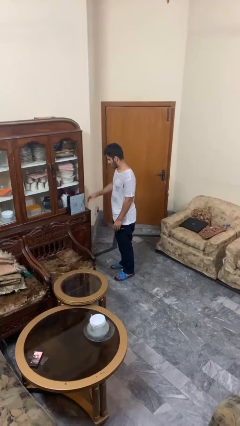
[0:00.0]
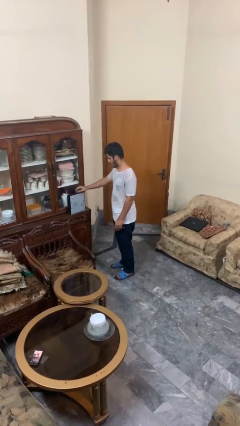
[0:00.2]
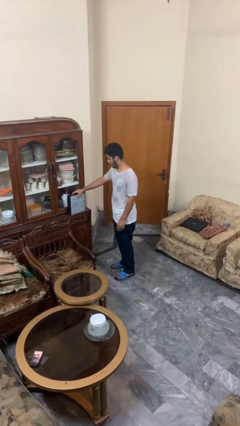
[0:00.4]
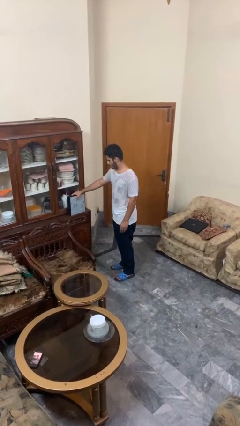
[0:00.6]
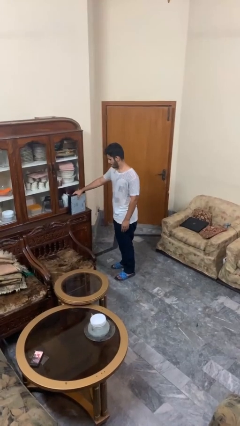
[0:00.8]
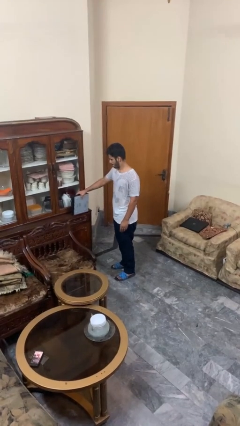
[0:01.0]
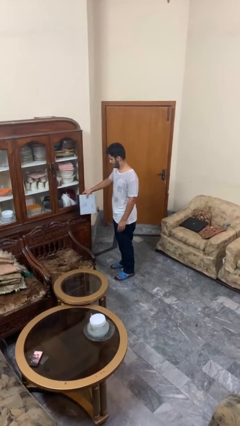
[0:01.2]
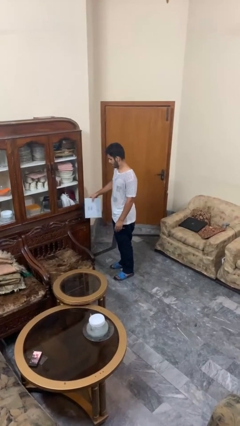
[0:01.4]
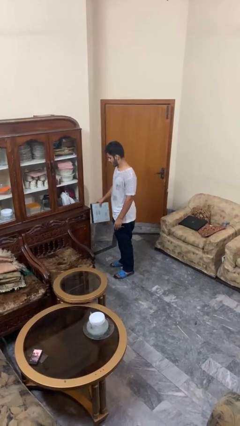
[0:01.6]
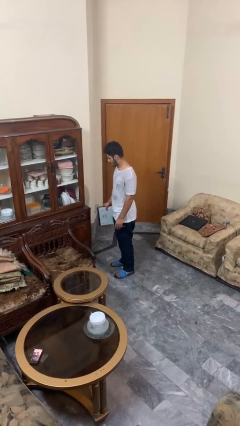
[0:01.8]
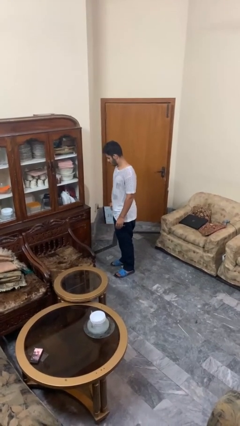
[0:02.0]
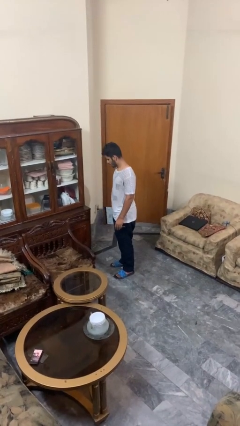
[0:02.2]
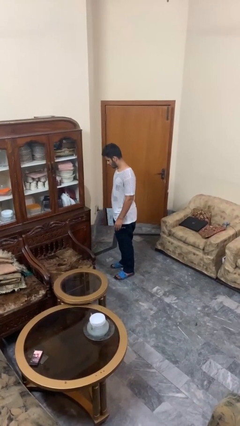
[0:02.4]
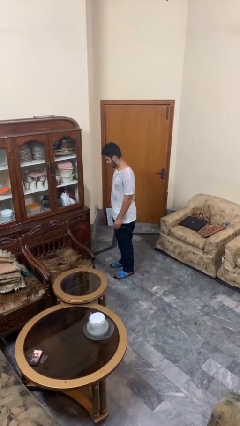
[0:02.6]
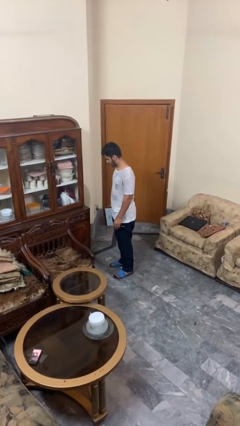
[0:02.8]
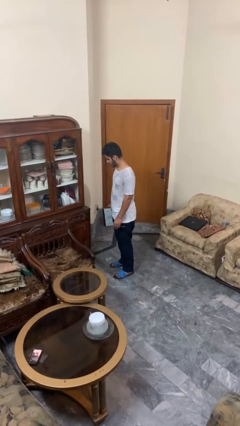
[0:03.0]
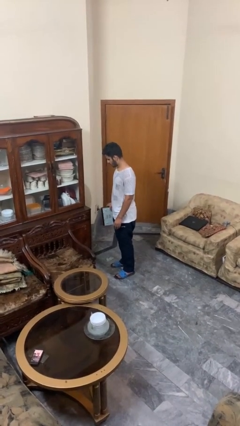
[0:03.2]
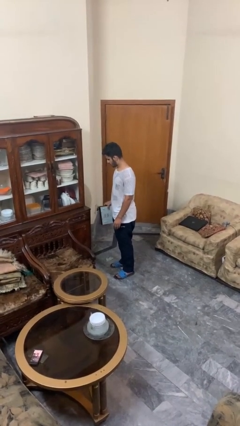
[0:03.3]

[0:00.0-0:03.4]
person picks up object from countertop

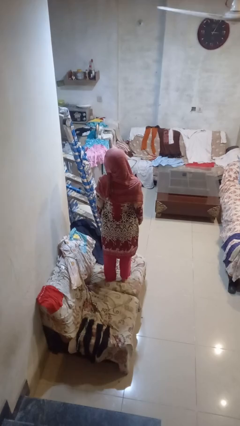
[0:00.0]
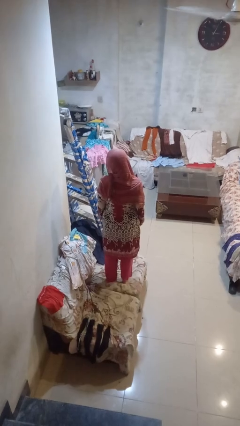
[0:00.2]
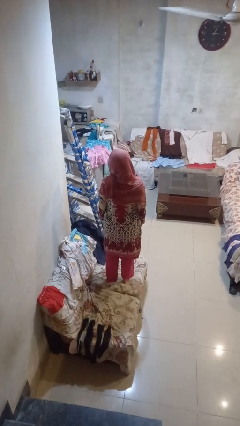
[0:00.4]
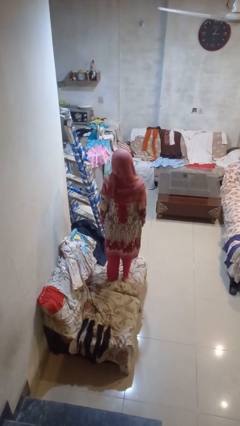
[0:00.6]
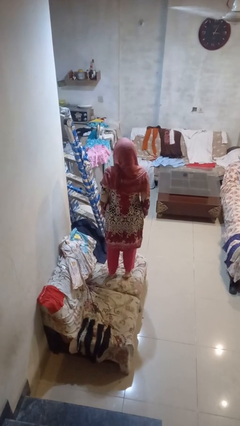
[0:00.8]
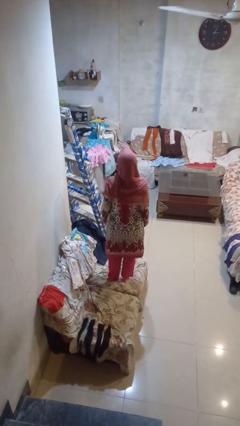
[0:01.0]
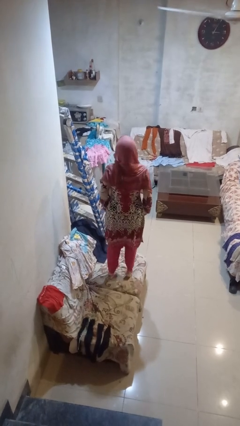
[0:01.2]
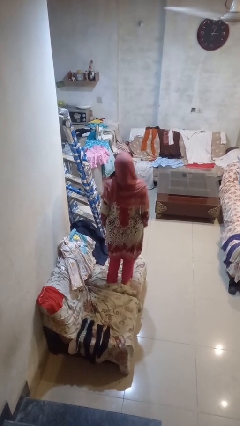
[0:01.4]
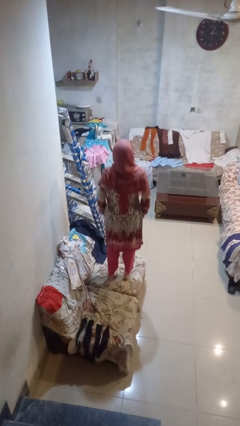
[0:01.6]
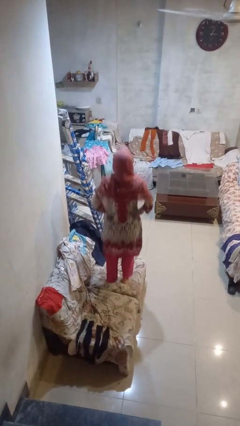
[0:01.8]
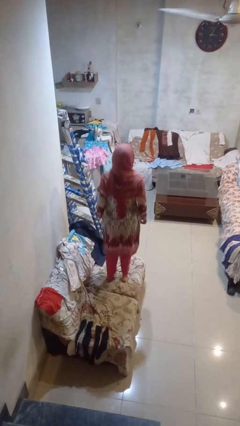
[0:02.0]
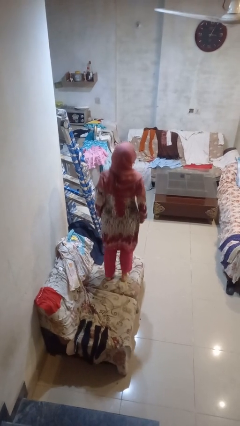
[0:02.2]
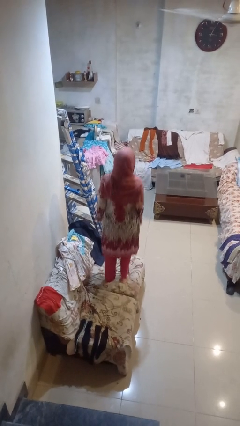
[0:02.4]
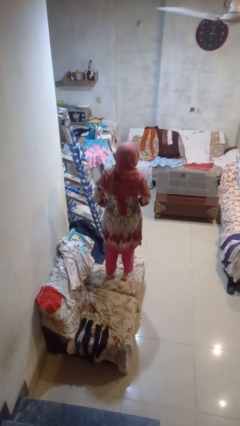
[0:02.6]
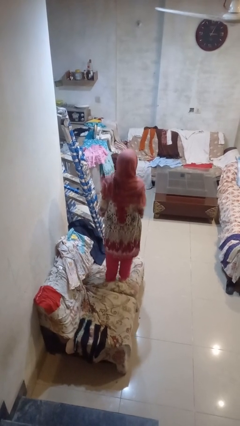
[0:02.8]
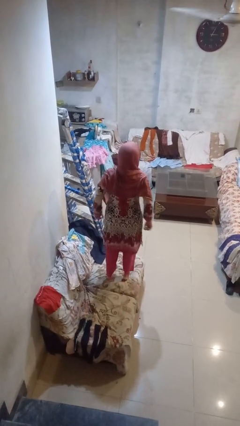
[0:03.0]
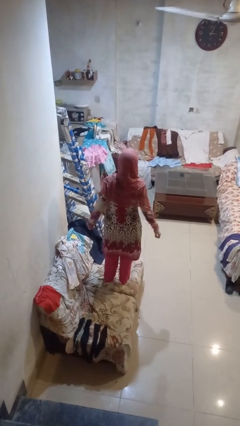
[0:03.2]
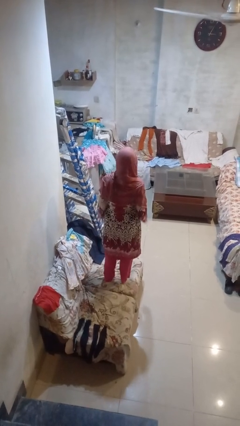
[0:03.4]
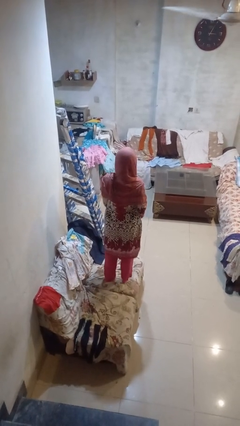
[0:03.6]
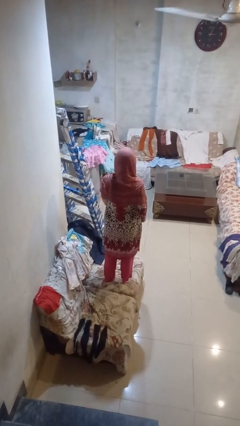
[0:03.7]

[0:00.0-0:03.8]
person jumps on couch

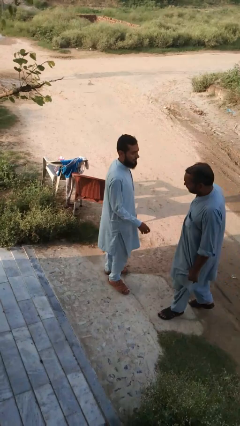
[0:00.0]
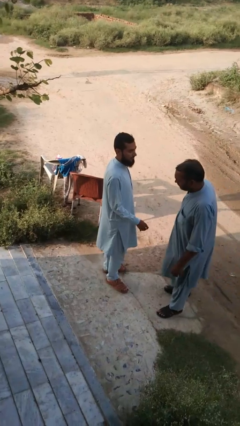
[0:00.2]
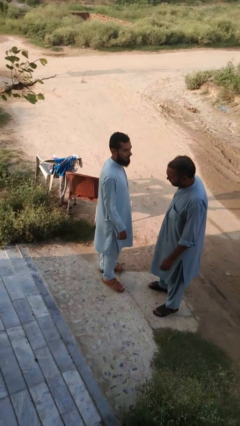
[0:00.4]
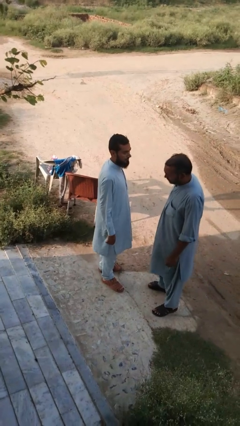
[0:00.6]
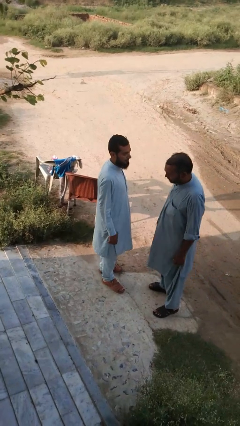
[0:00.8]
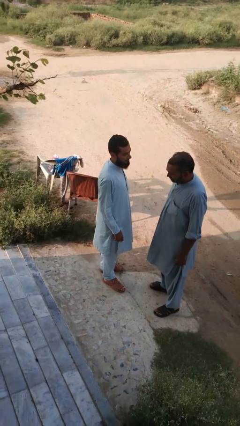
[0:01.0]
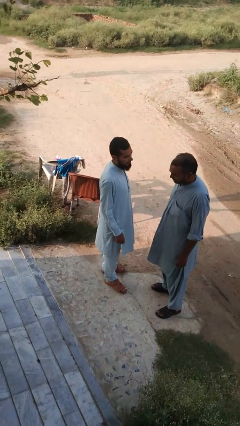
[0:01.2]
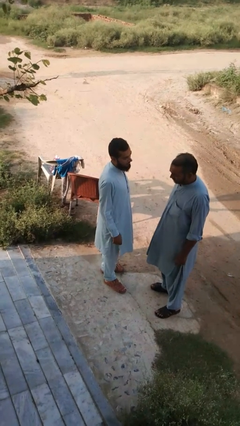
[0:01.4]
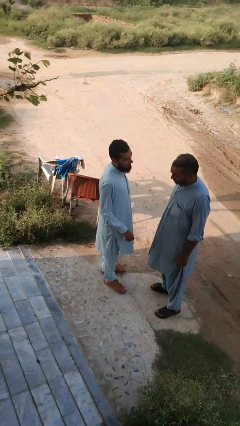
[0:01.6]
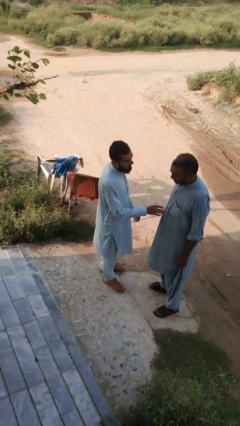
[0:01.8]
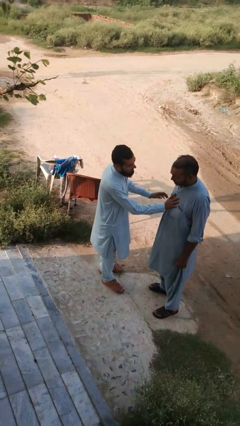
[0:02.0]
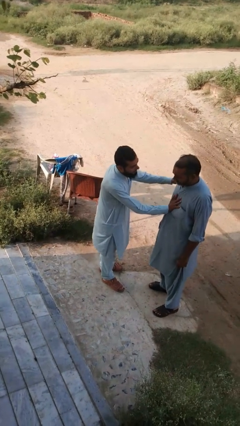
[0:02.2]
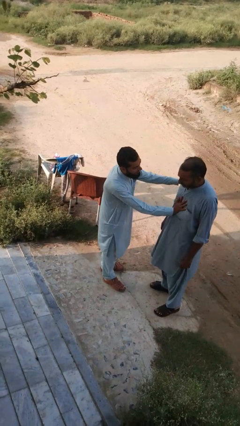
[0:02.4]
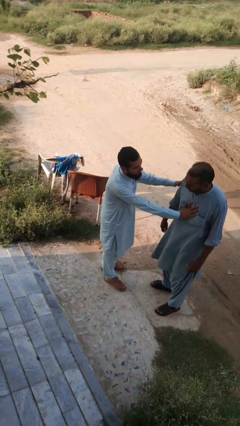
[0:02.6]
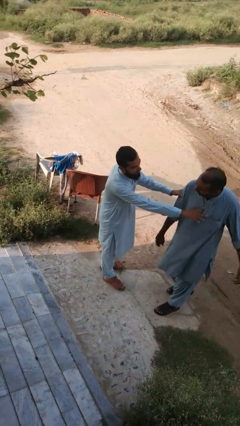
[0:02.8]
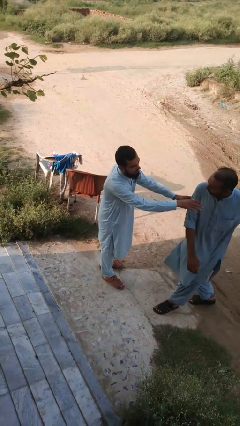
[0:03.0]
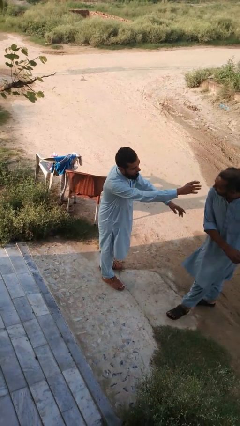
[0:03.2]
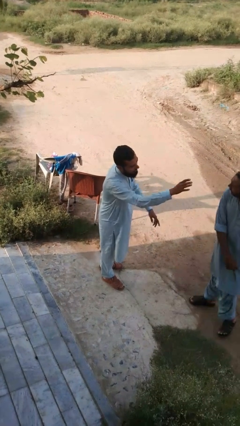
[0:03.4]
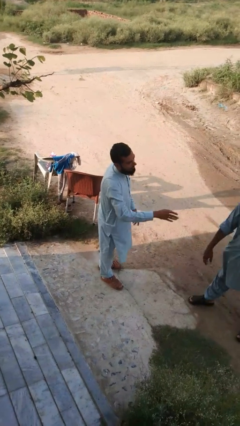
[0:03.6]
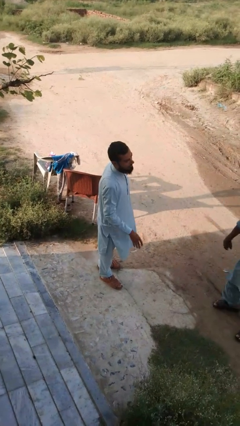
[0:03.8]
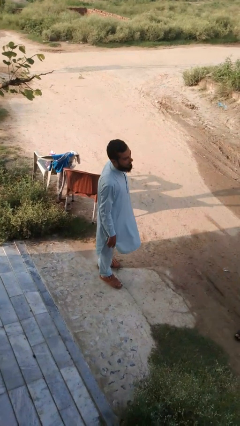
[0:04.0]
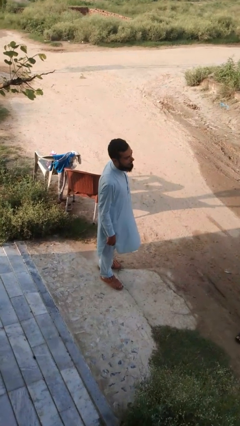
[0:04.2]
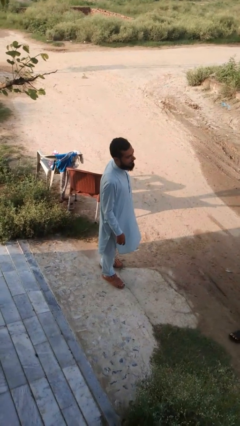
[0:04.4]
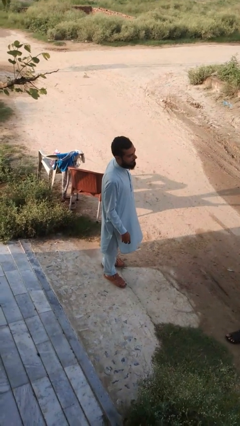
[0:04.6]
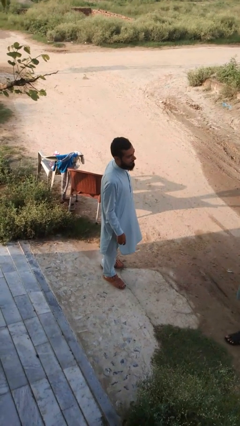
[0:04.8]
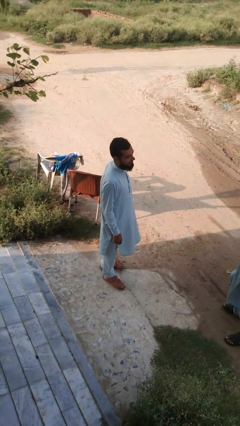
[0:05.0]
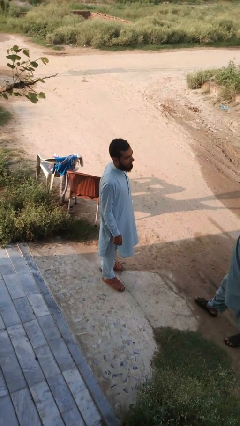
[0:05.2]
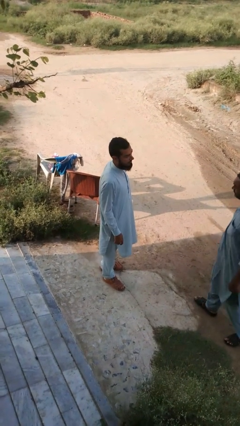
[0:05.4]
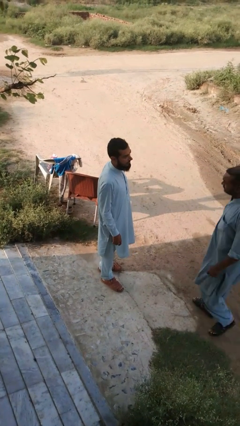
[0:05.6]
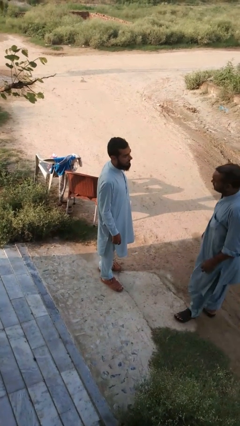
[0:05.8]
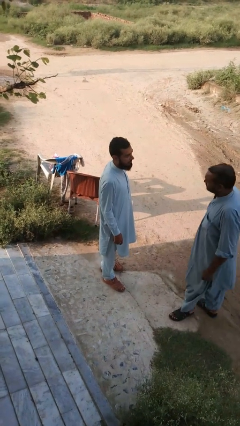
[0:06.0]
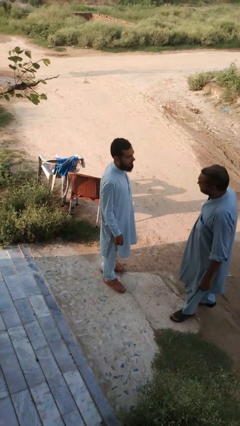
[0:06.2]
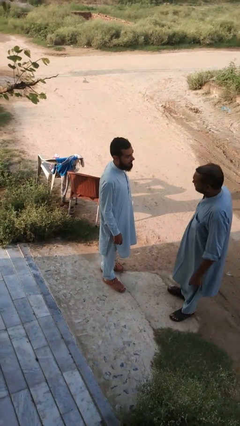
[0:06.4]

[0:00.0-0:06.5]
person shoves person

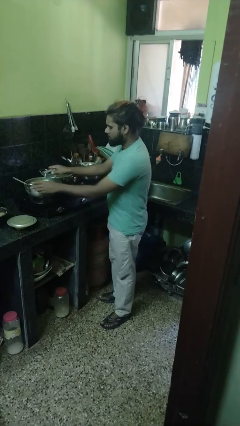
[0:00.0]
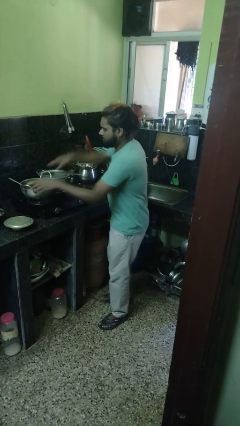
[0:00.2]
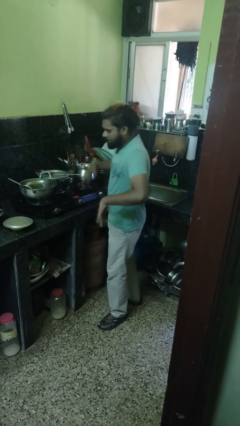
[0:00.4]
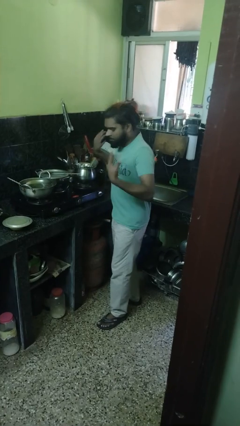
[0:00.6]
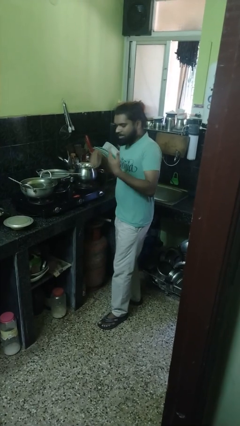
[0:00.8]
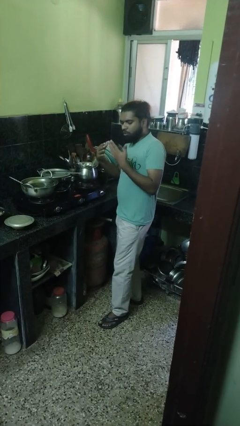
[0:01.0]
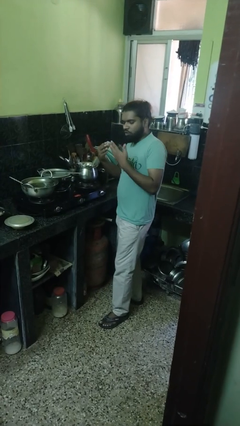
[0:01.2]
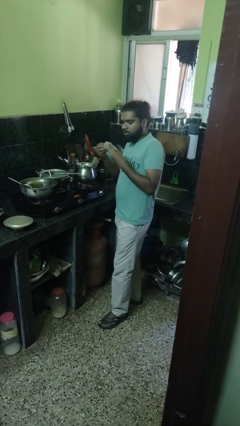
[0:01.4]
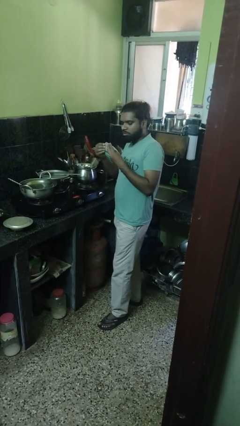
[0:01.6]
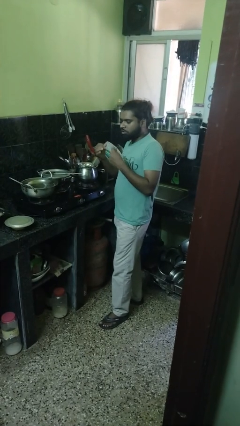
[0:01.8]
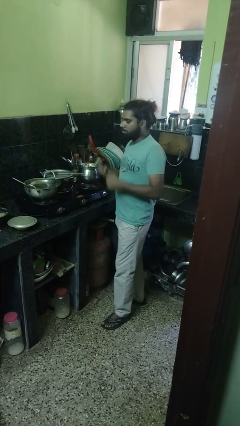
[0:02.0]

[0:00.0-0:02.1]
person burns hand

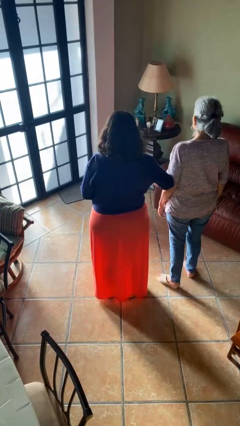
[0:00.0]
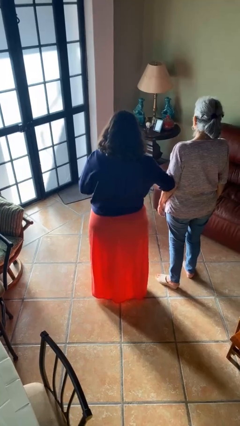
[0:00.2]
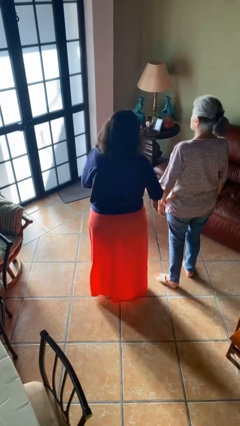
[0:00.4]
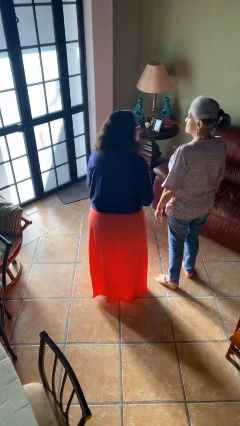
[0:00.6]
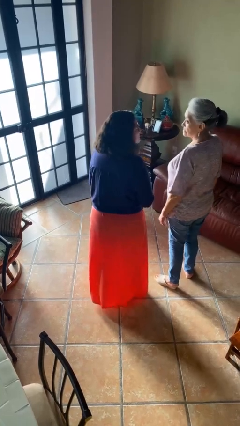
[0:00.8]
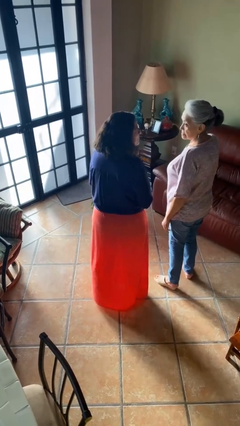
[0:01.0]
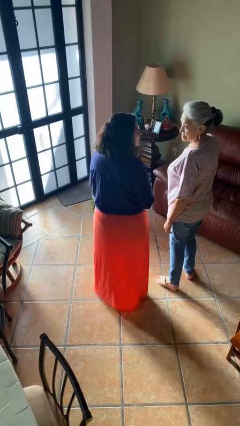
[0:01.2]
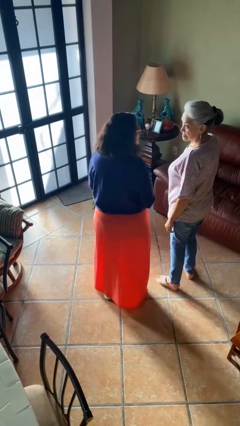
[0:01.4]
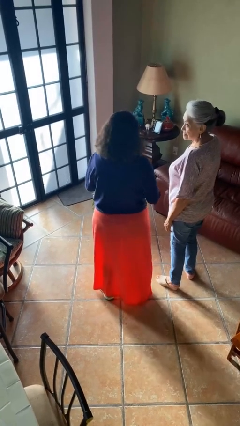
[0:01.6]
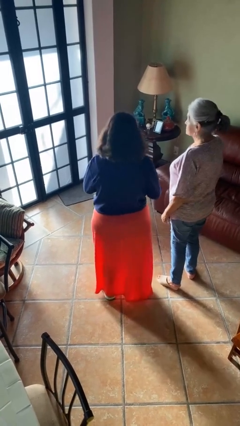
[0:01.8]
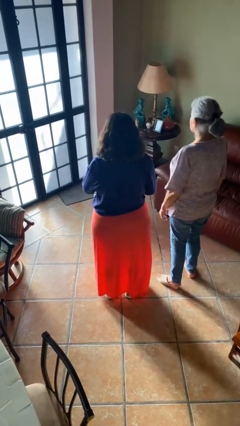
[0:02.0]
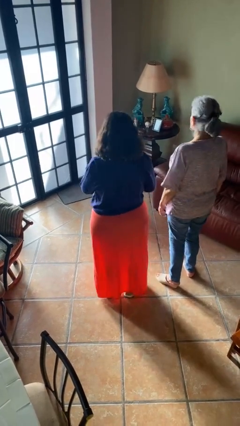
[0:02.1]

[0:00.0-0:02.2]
person nudges person with elbow
